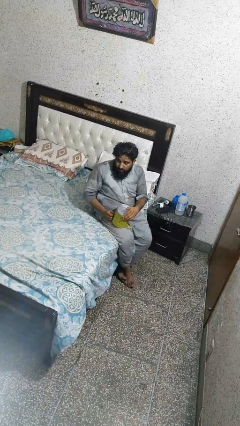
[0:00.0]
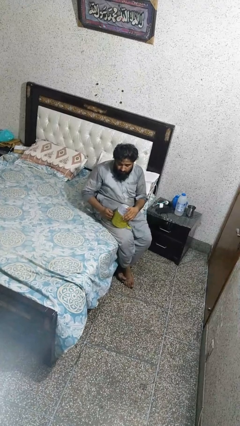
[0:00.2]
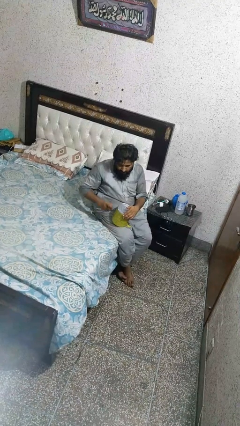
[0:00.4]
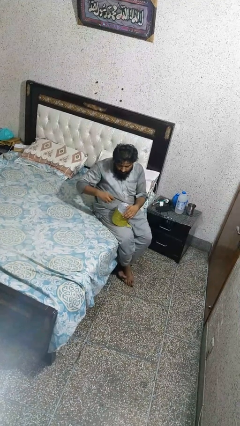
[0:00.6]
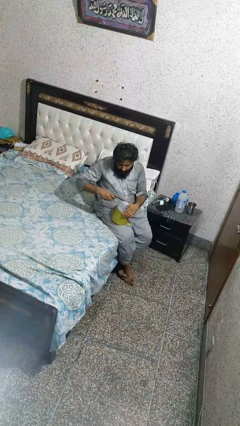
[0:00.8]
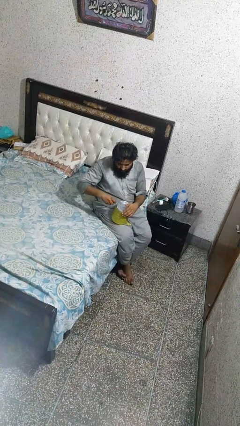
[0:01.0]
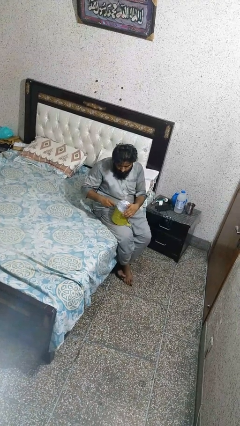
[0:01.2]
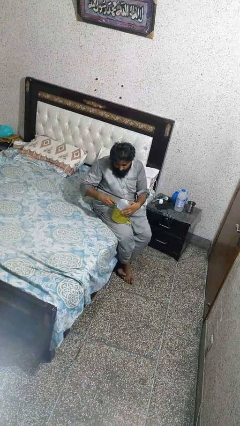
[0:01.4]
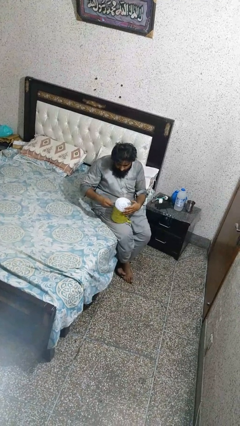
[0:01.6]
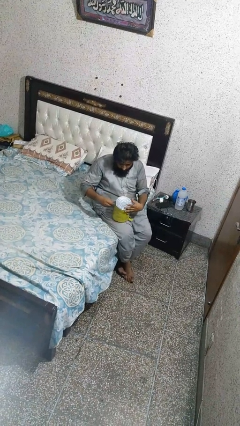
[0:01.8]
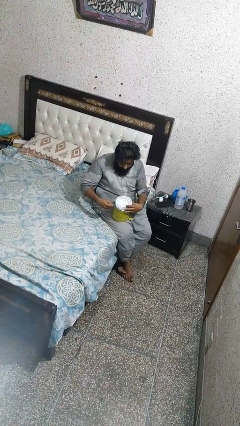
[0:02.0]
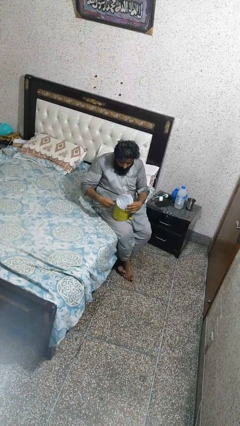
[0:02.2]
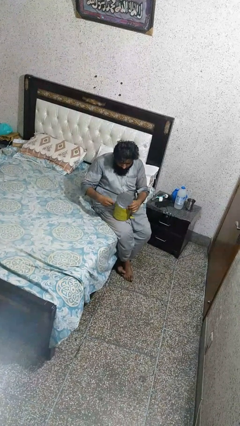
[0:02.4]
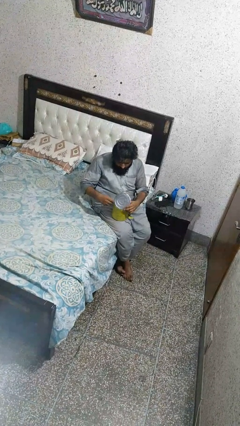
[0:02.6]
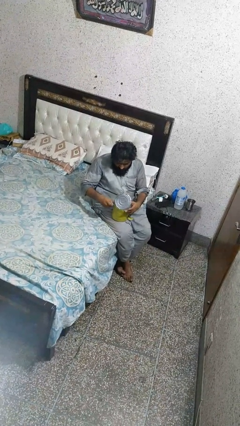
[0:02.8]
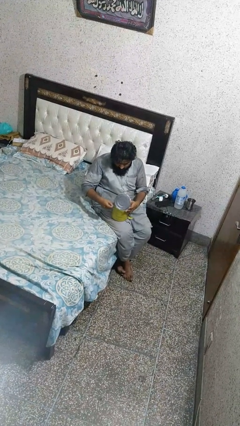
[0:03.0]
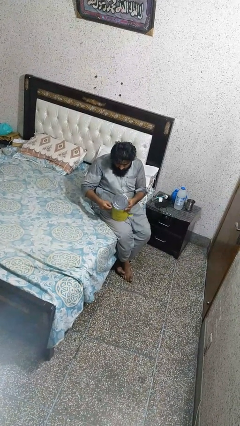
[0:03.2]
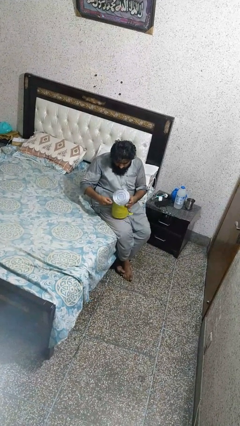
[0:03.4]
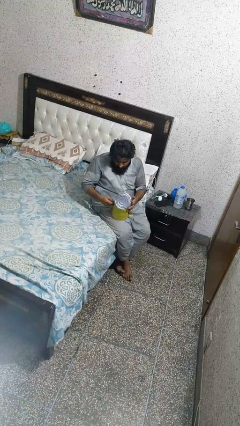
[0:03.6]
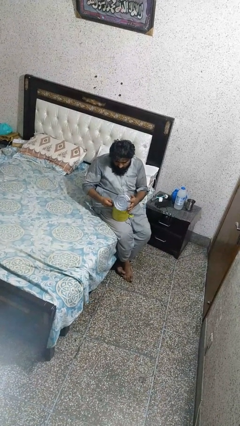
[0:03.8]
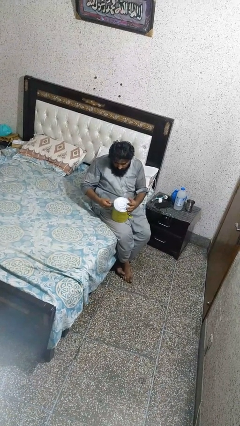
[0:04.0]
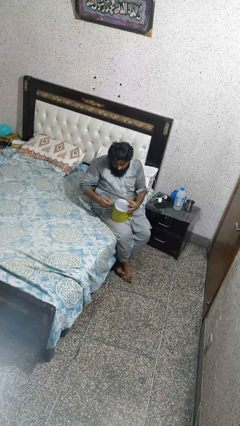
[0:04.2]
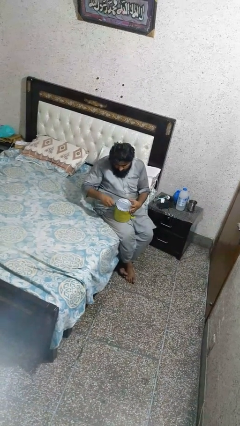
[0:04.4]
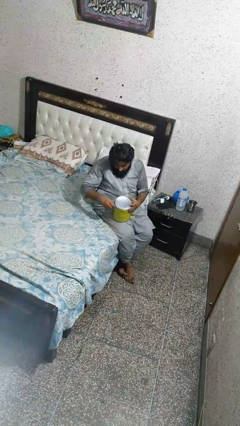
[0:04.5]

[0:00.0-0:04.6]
person opens can with can opener

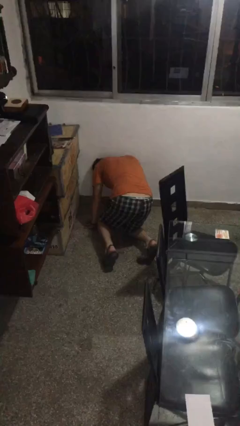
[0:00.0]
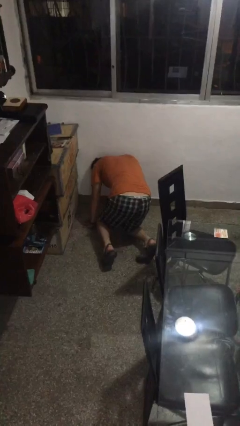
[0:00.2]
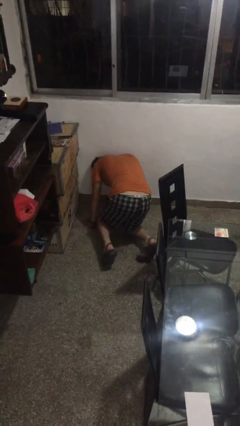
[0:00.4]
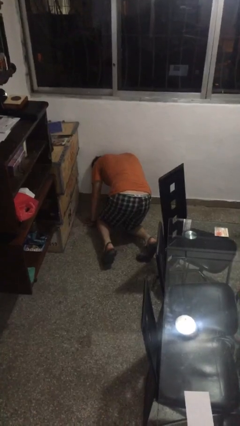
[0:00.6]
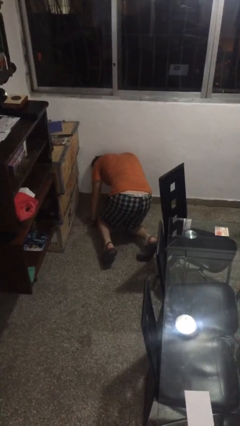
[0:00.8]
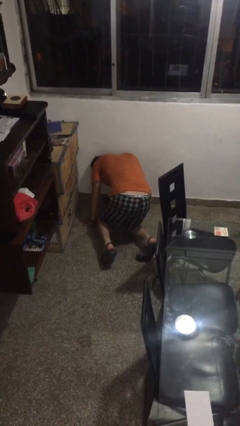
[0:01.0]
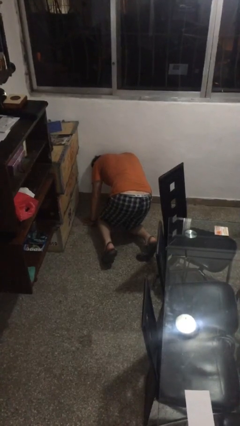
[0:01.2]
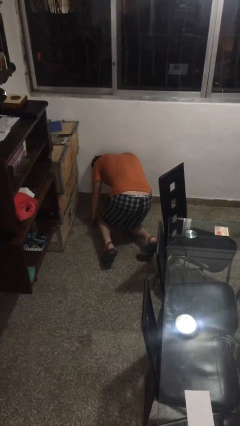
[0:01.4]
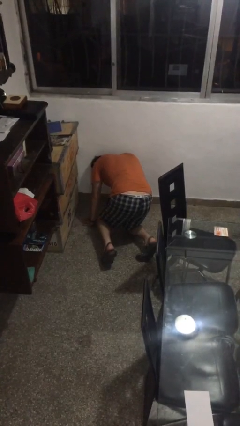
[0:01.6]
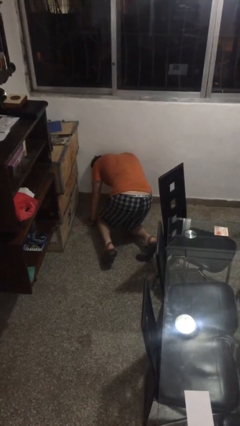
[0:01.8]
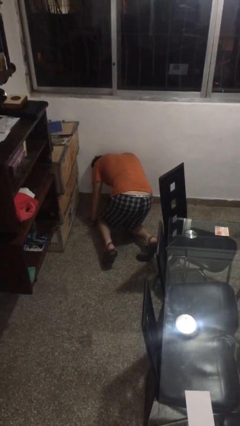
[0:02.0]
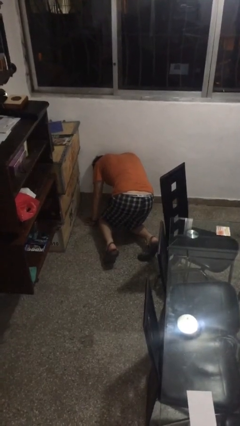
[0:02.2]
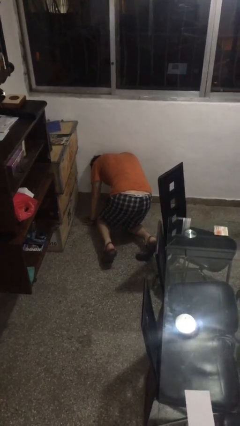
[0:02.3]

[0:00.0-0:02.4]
person lies down on floor

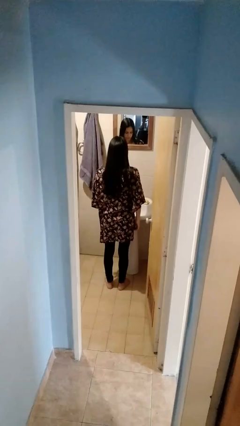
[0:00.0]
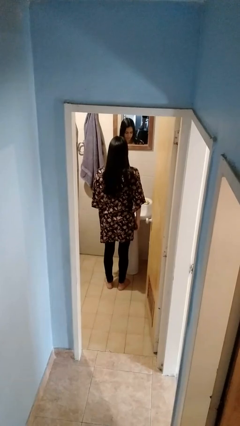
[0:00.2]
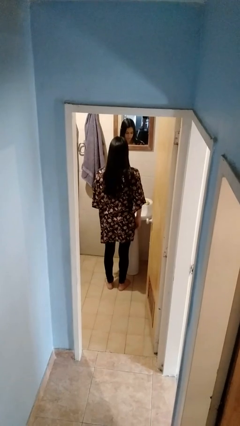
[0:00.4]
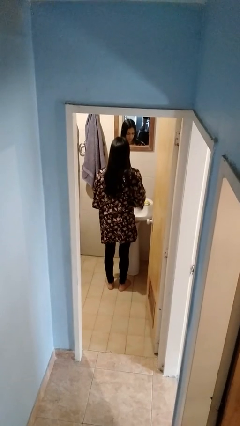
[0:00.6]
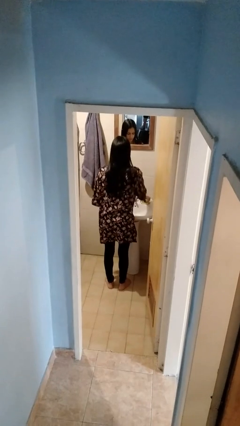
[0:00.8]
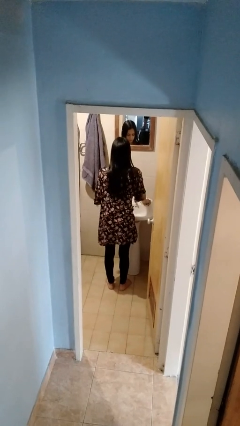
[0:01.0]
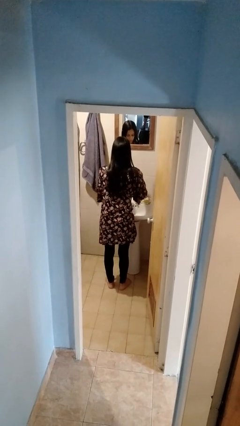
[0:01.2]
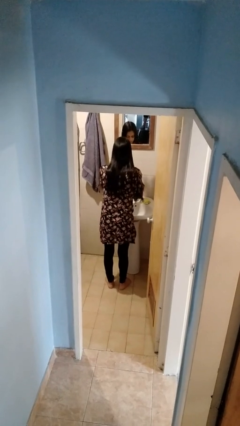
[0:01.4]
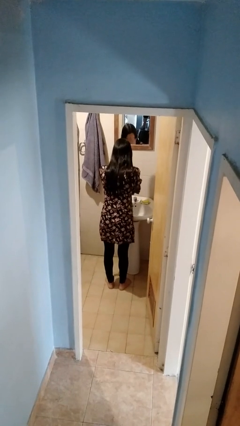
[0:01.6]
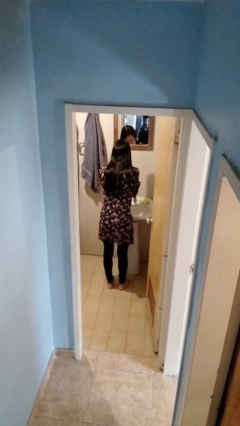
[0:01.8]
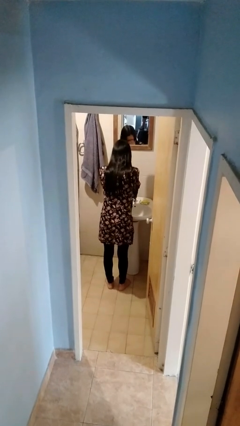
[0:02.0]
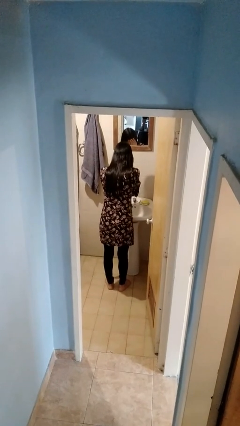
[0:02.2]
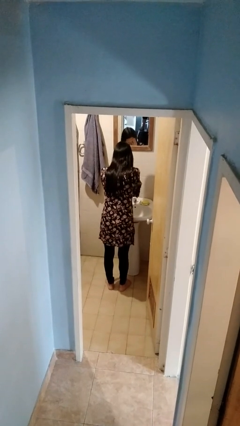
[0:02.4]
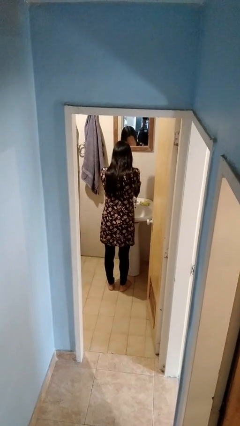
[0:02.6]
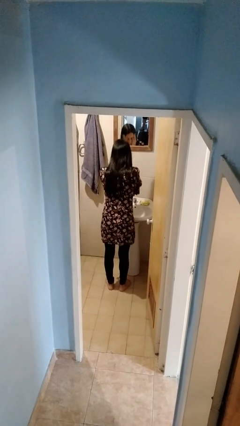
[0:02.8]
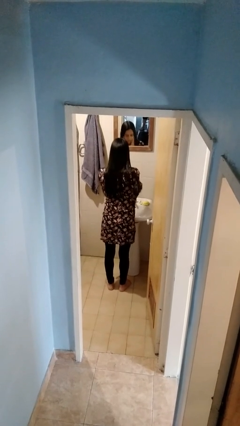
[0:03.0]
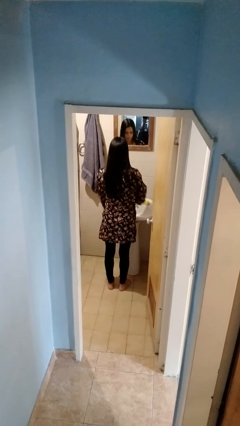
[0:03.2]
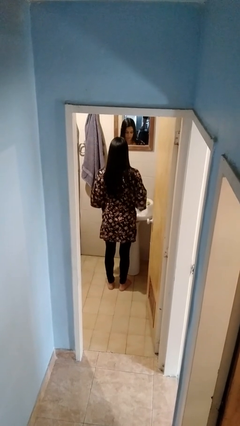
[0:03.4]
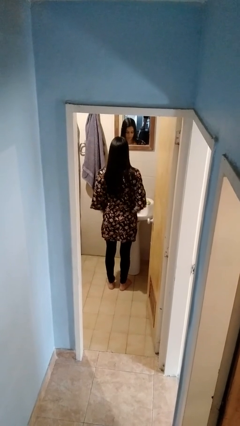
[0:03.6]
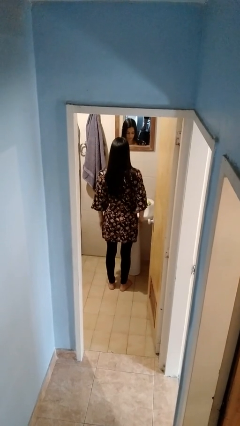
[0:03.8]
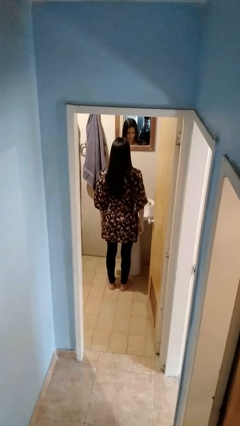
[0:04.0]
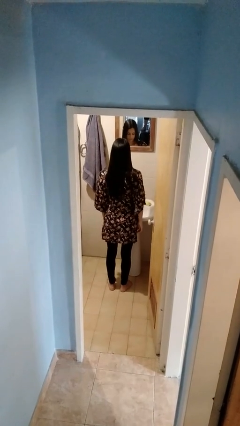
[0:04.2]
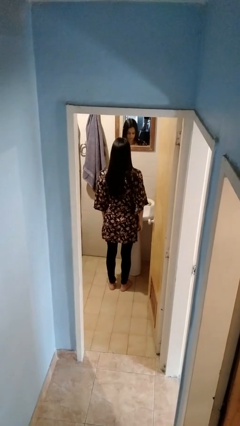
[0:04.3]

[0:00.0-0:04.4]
person washes face

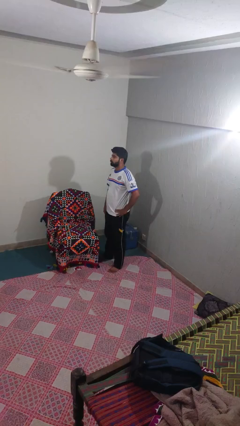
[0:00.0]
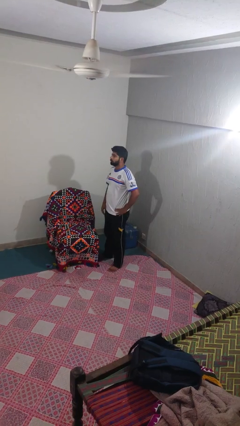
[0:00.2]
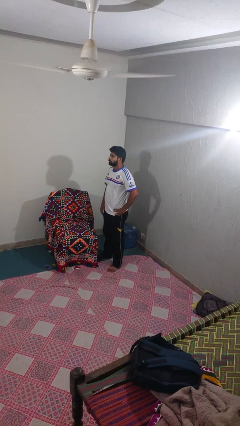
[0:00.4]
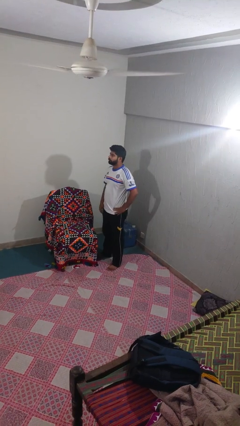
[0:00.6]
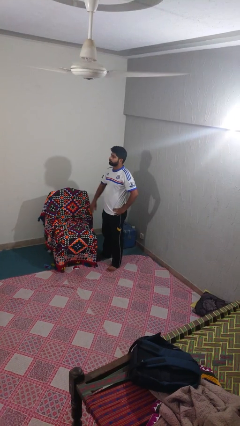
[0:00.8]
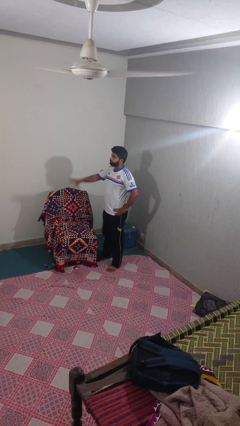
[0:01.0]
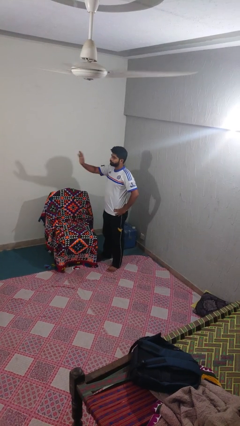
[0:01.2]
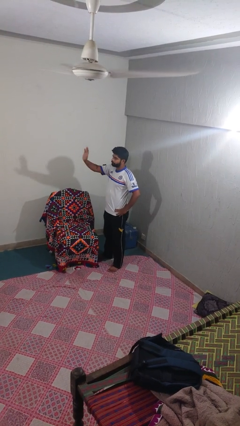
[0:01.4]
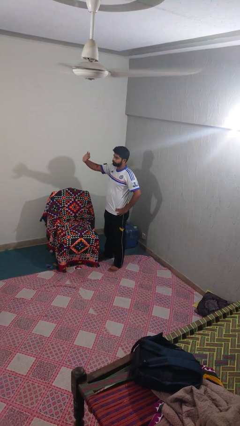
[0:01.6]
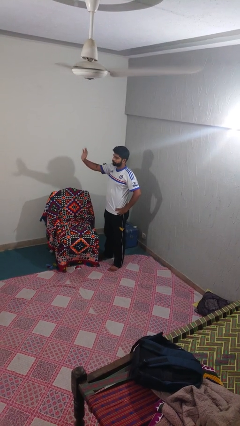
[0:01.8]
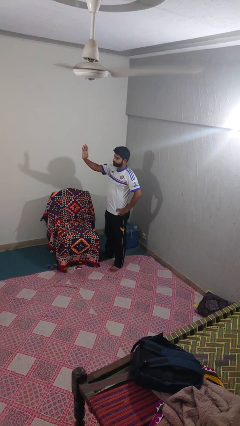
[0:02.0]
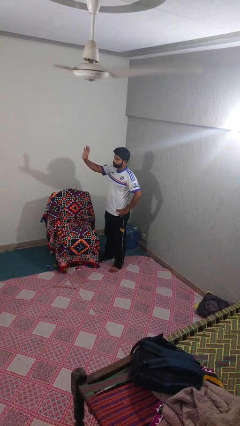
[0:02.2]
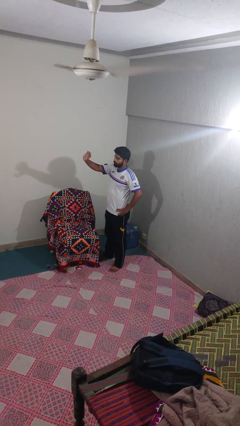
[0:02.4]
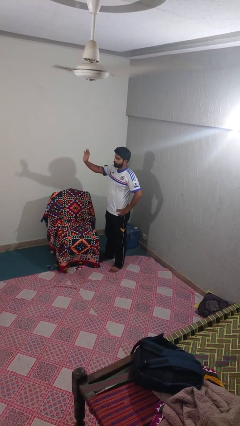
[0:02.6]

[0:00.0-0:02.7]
person waves at person

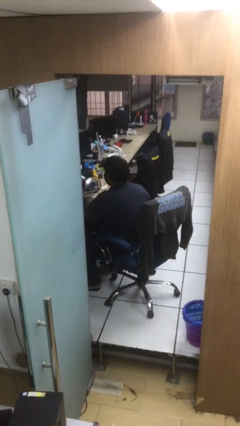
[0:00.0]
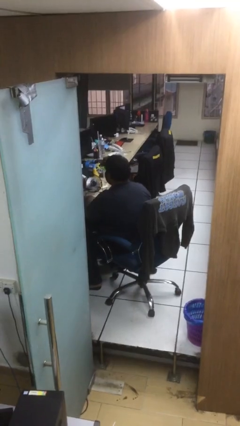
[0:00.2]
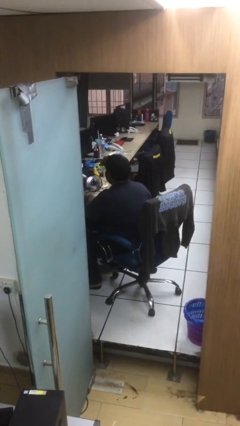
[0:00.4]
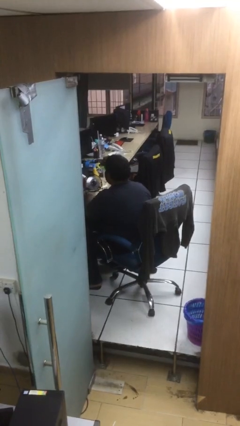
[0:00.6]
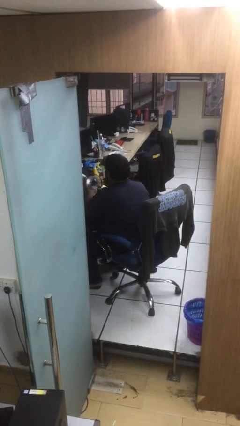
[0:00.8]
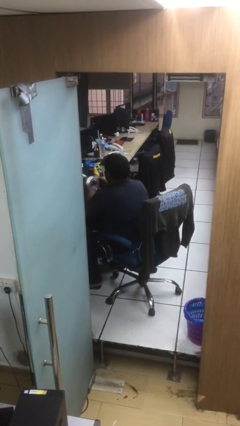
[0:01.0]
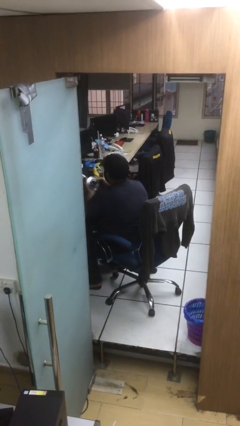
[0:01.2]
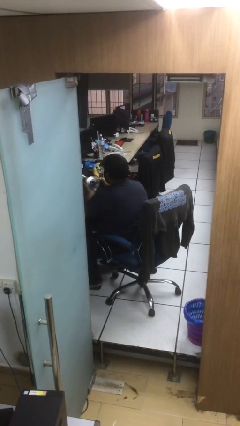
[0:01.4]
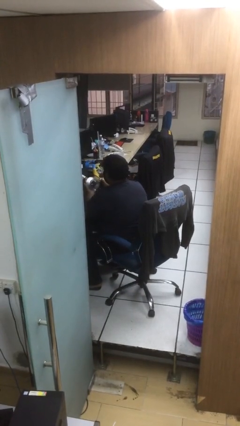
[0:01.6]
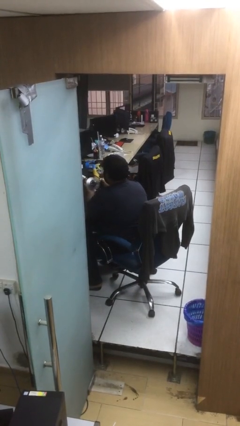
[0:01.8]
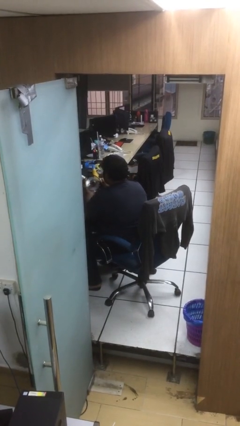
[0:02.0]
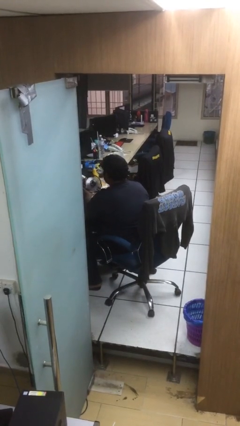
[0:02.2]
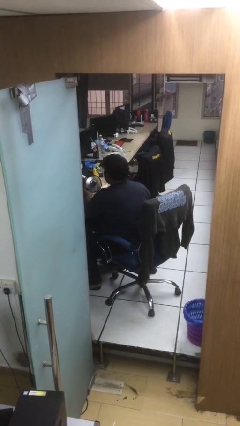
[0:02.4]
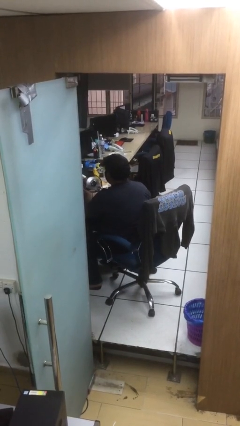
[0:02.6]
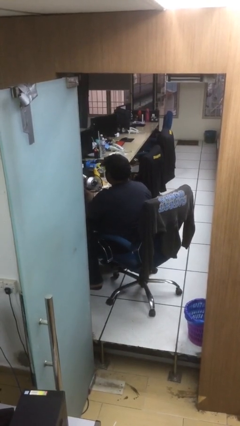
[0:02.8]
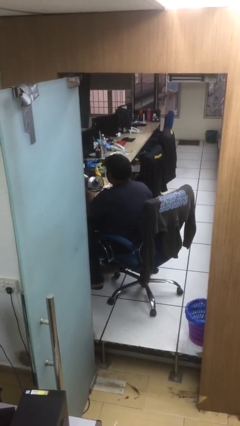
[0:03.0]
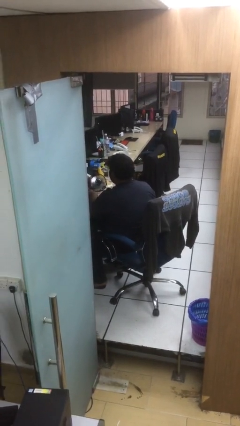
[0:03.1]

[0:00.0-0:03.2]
person turns off fan

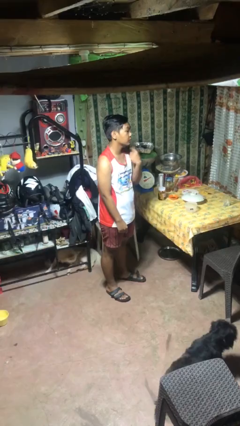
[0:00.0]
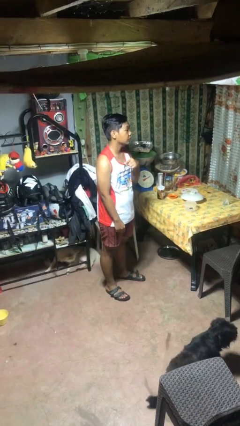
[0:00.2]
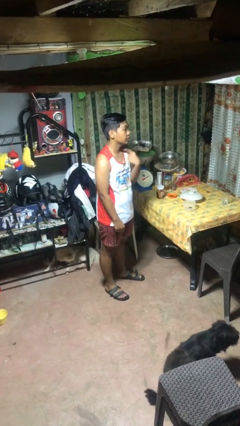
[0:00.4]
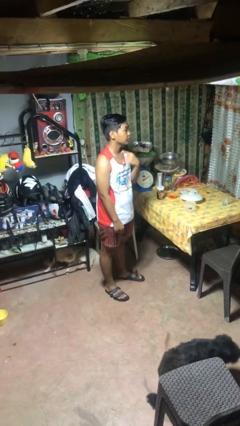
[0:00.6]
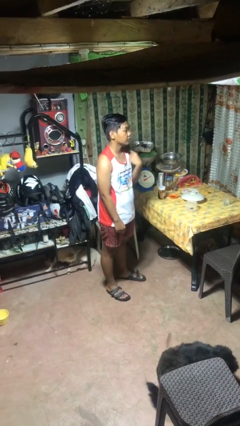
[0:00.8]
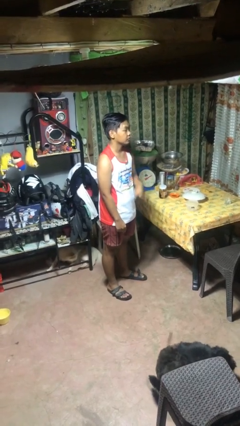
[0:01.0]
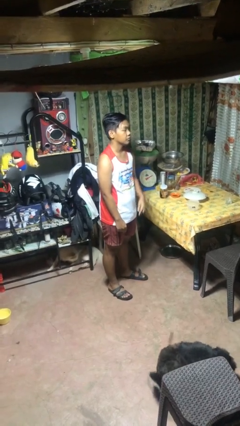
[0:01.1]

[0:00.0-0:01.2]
person gestures cut
